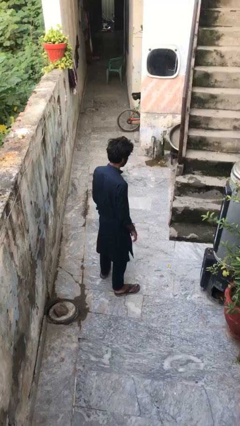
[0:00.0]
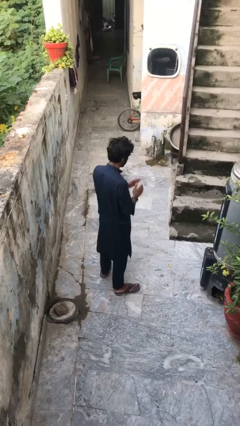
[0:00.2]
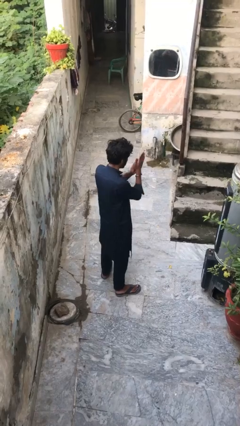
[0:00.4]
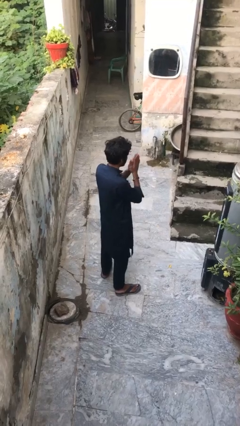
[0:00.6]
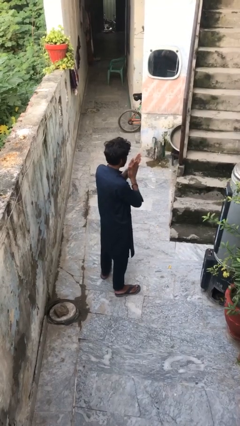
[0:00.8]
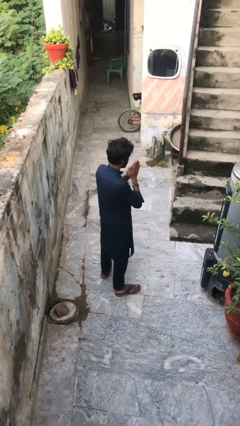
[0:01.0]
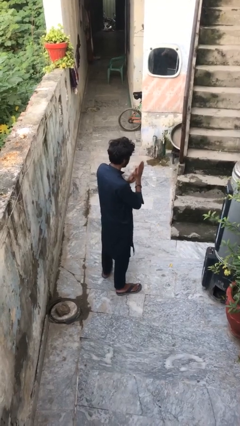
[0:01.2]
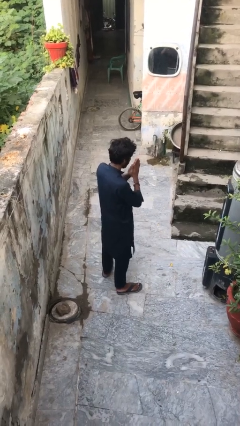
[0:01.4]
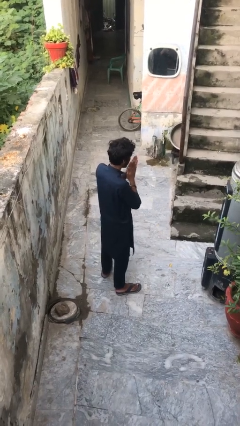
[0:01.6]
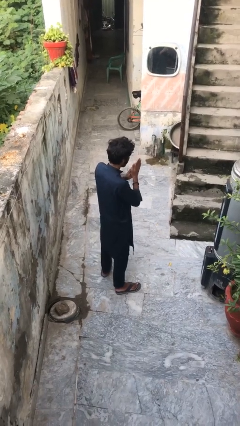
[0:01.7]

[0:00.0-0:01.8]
person blows into hands

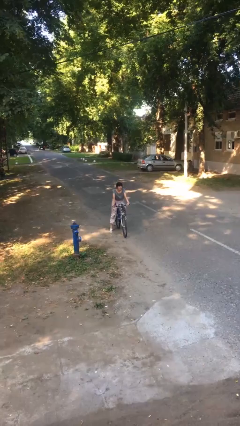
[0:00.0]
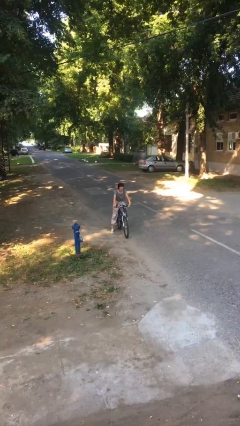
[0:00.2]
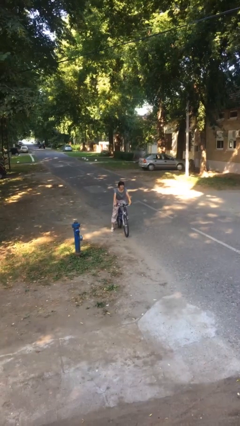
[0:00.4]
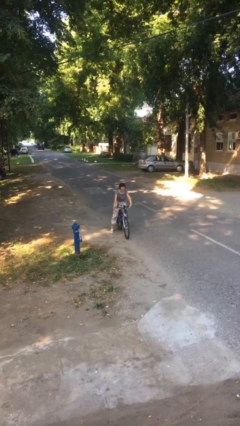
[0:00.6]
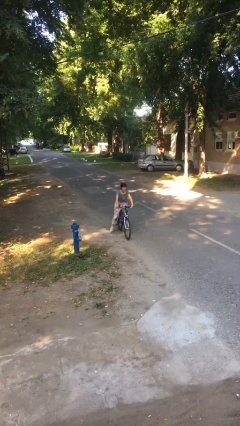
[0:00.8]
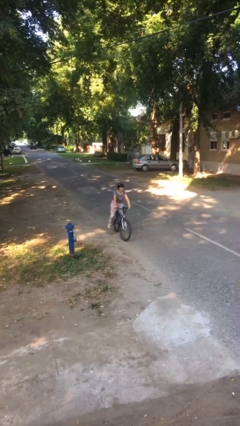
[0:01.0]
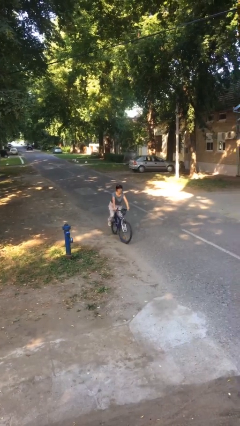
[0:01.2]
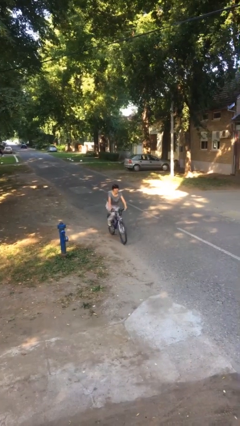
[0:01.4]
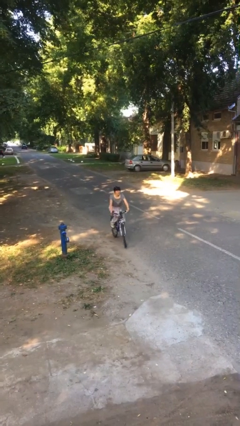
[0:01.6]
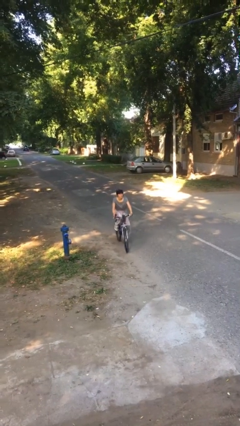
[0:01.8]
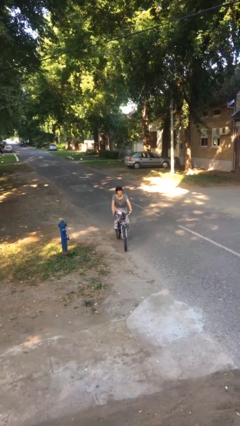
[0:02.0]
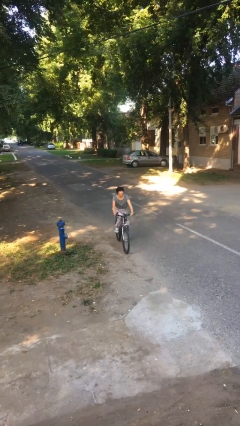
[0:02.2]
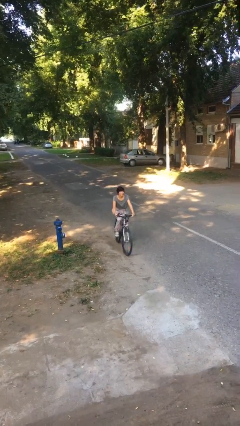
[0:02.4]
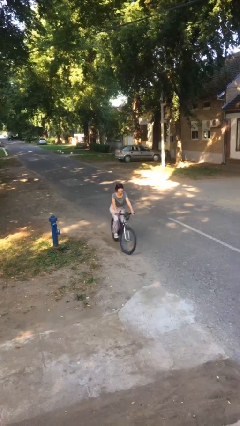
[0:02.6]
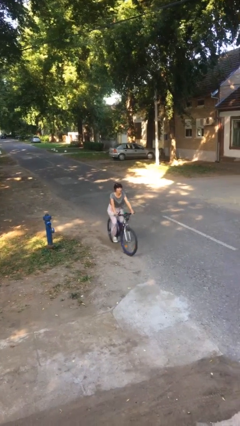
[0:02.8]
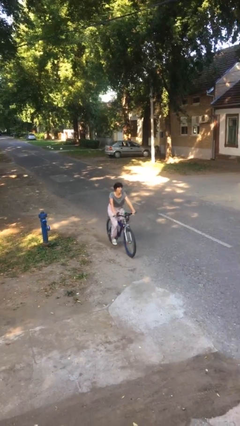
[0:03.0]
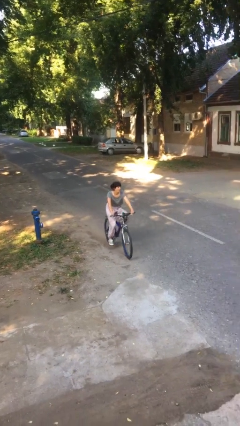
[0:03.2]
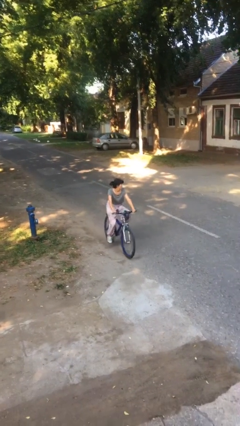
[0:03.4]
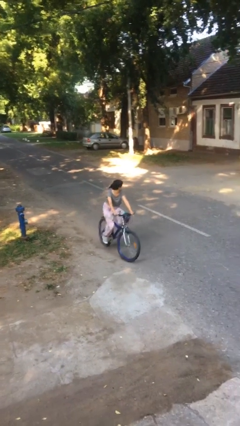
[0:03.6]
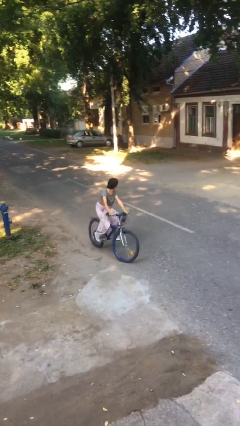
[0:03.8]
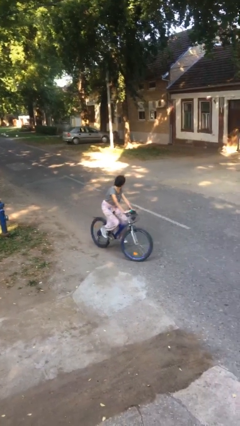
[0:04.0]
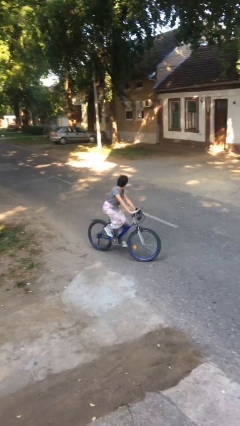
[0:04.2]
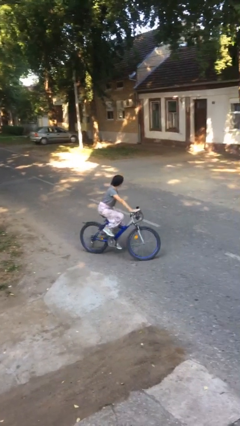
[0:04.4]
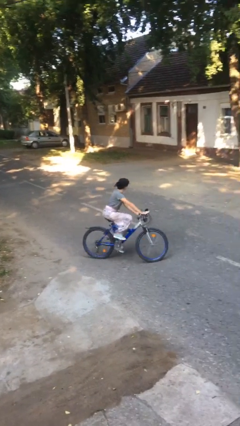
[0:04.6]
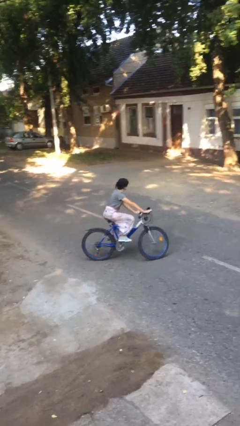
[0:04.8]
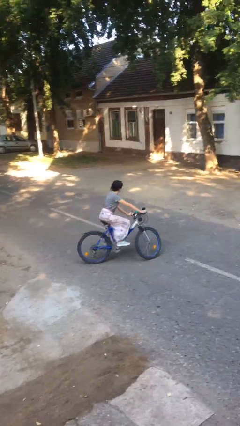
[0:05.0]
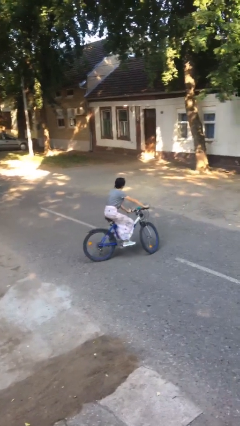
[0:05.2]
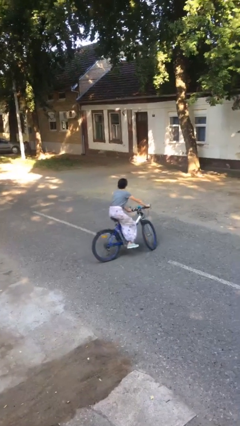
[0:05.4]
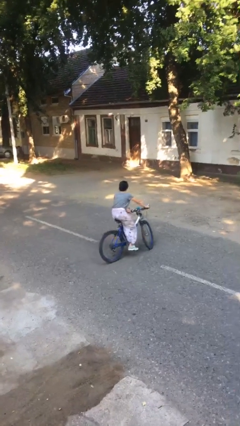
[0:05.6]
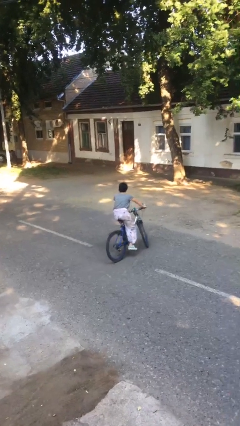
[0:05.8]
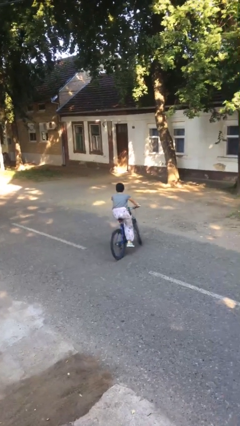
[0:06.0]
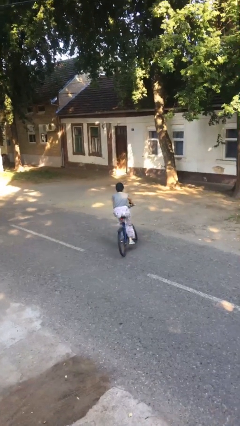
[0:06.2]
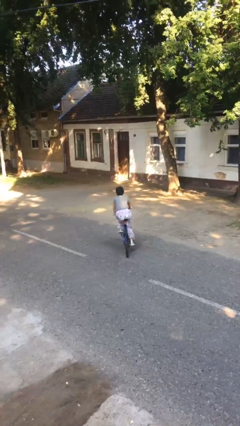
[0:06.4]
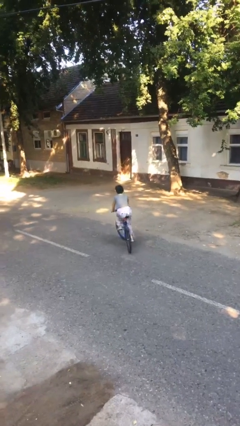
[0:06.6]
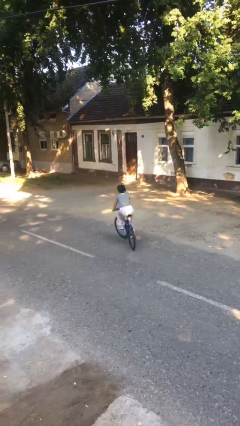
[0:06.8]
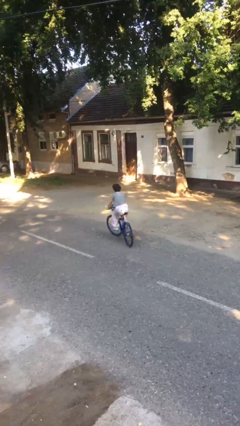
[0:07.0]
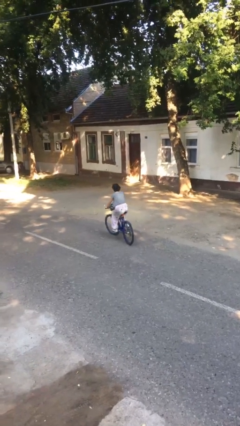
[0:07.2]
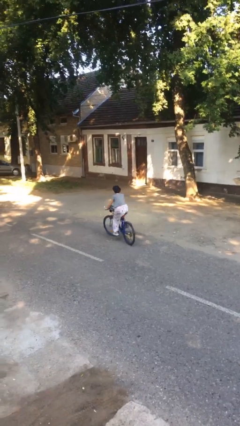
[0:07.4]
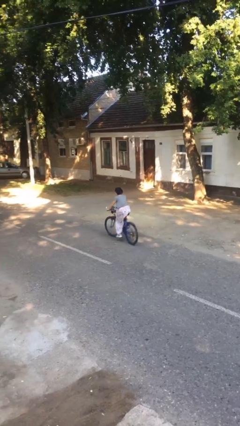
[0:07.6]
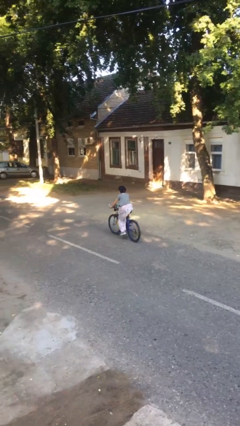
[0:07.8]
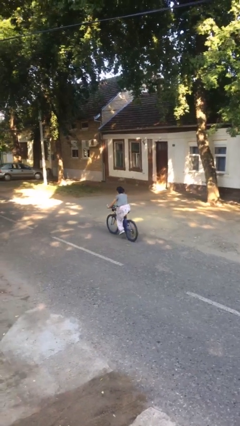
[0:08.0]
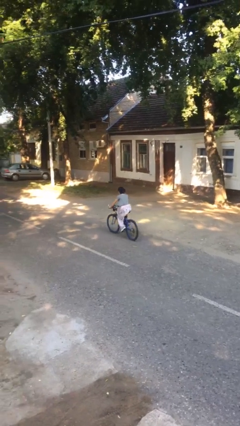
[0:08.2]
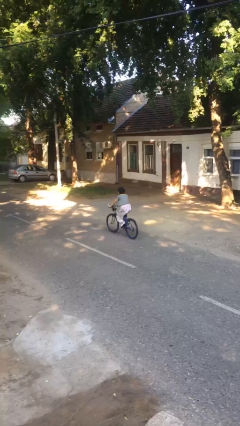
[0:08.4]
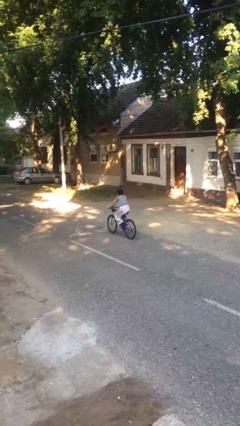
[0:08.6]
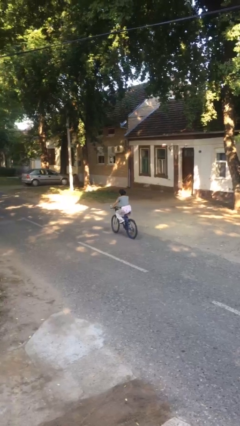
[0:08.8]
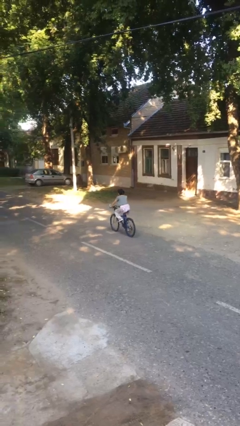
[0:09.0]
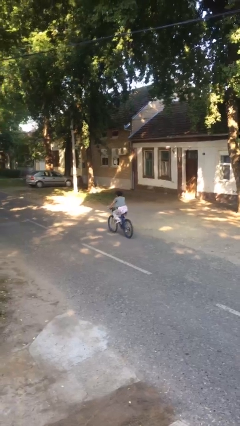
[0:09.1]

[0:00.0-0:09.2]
person rides bicycle

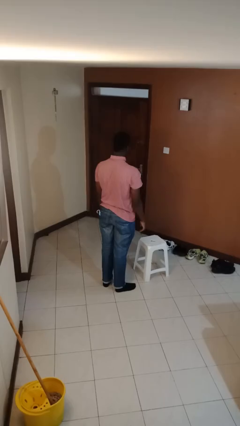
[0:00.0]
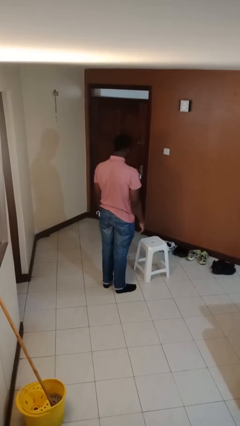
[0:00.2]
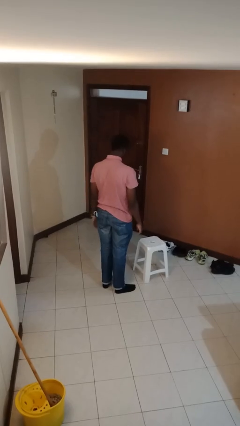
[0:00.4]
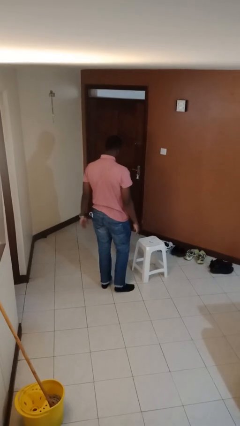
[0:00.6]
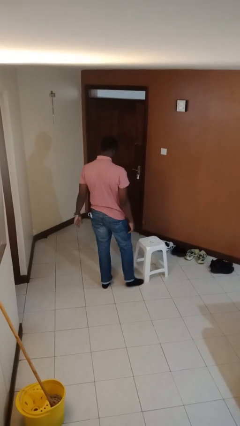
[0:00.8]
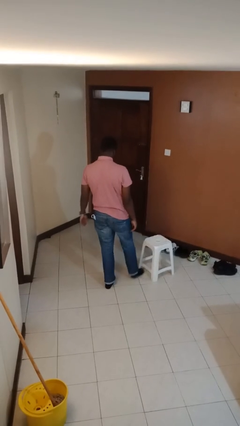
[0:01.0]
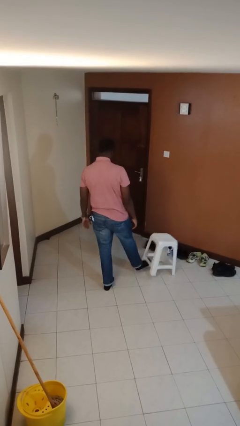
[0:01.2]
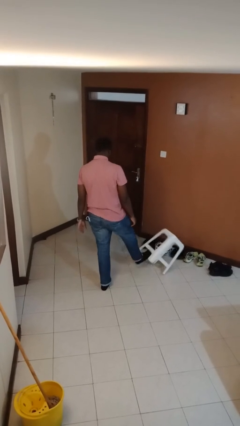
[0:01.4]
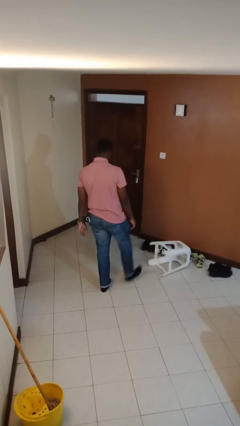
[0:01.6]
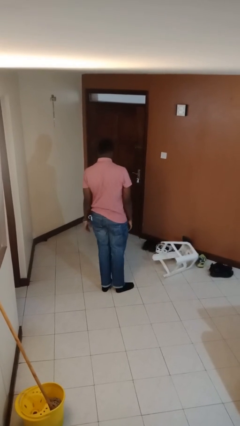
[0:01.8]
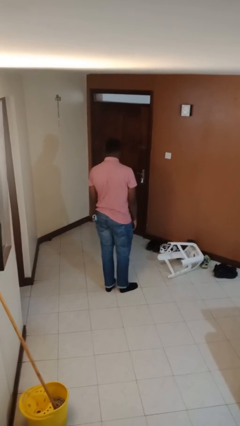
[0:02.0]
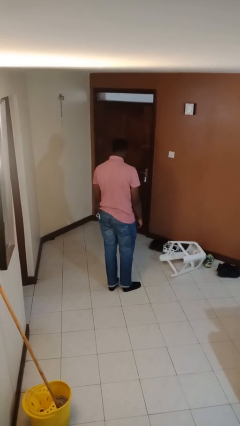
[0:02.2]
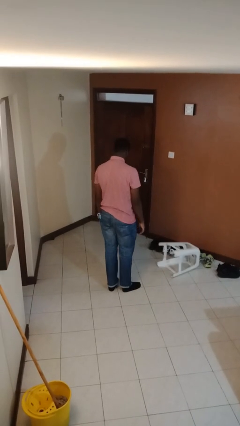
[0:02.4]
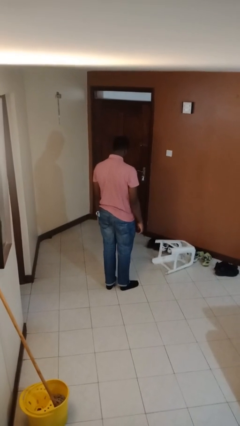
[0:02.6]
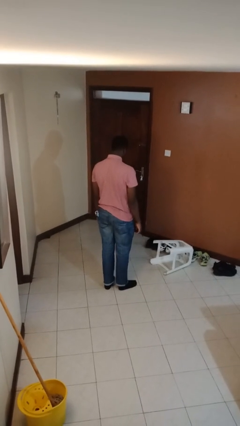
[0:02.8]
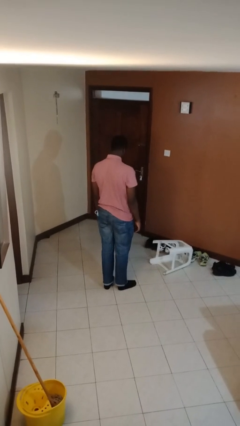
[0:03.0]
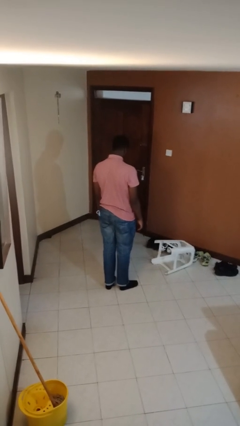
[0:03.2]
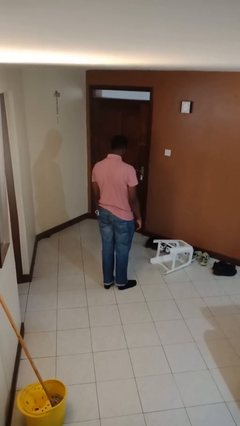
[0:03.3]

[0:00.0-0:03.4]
person knocks over furniture

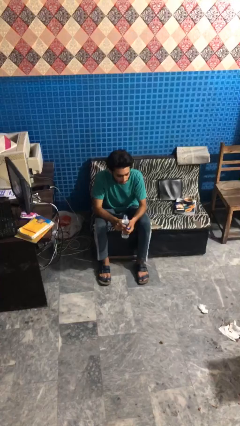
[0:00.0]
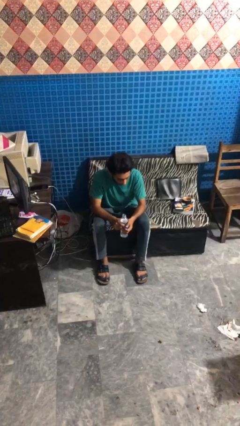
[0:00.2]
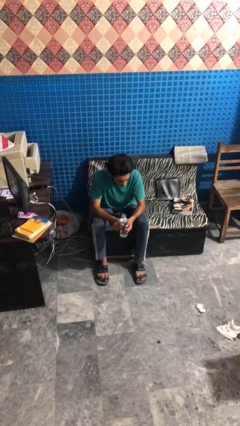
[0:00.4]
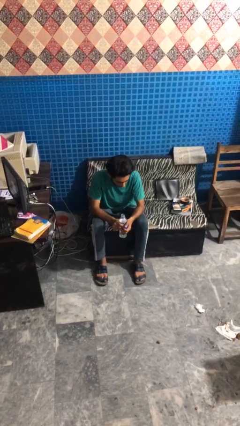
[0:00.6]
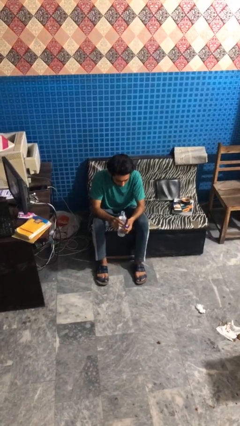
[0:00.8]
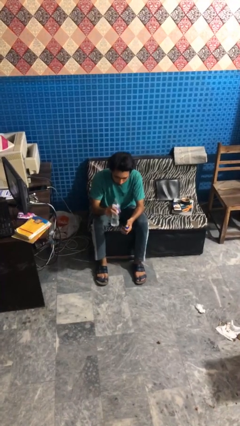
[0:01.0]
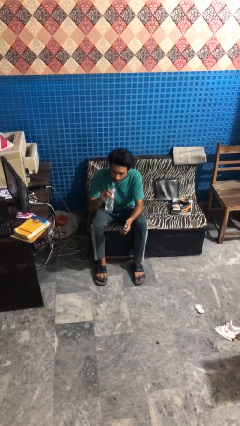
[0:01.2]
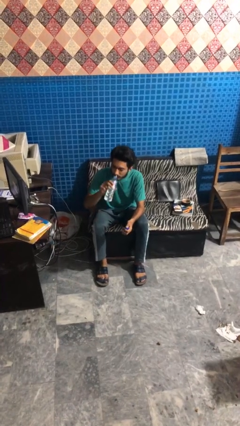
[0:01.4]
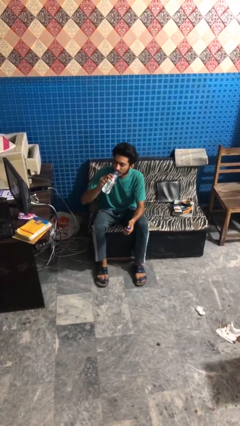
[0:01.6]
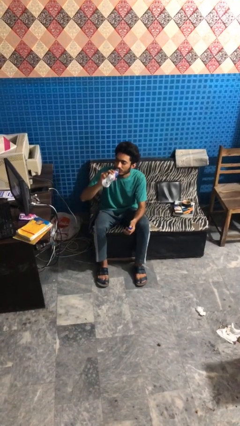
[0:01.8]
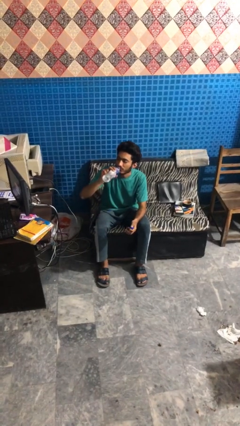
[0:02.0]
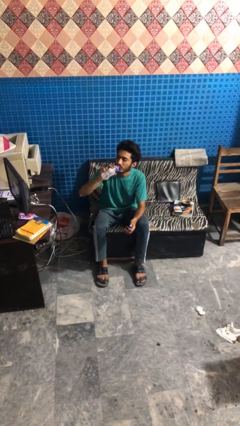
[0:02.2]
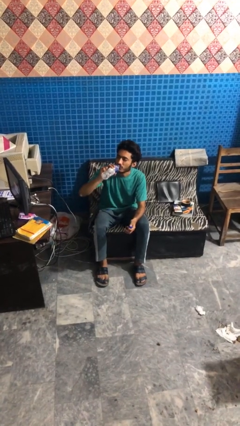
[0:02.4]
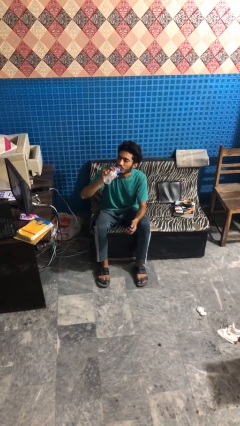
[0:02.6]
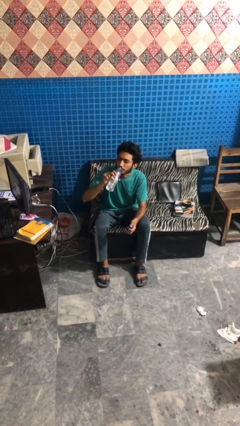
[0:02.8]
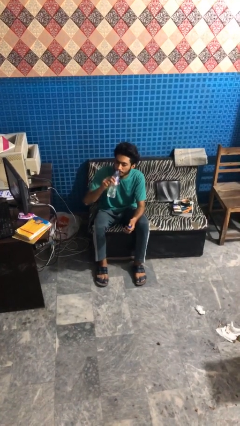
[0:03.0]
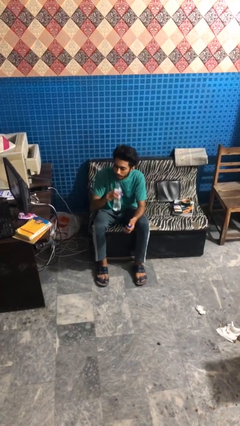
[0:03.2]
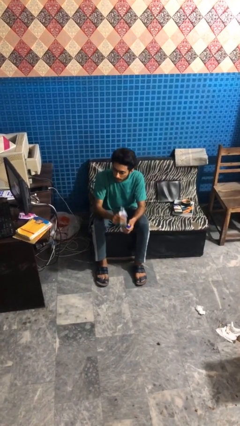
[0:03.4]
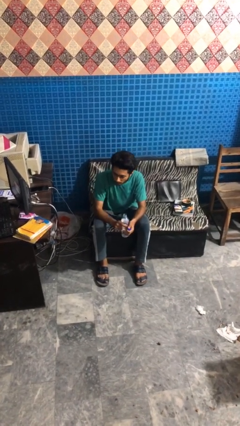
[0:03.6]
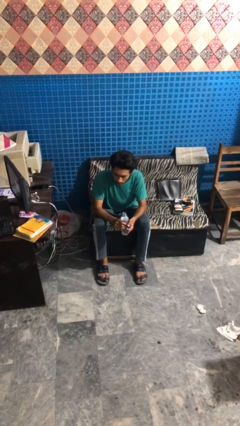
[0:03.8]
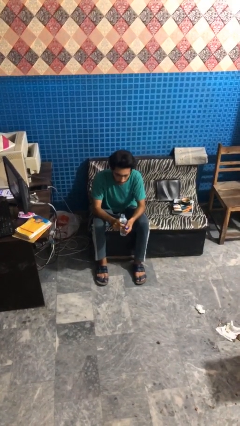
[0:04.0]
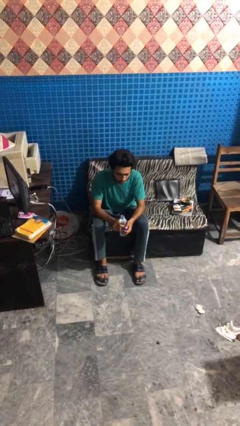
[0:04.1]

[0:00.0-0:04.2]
person drinks from bottle
